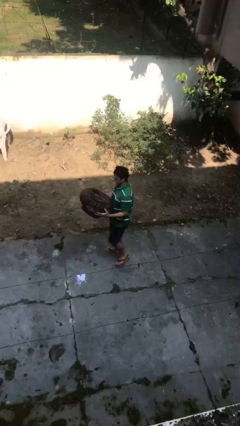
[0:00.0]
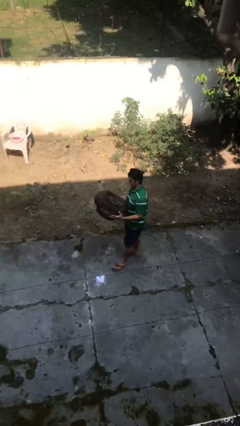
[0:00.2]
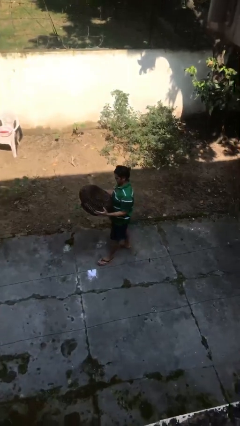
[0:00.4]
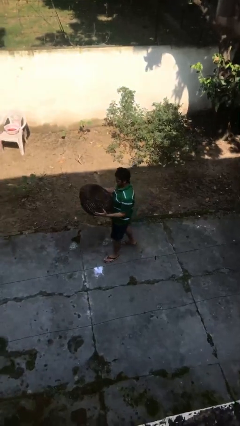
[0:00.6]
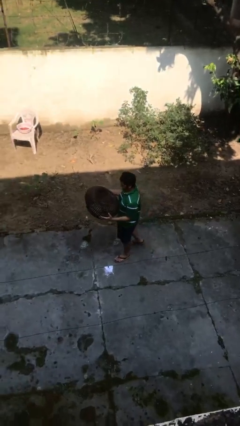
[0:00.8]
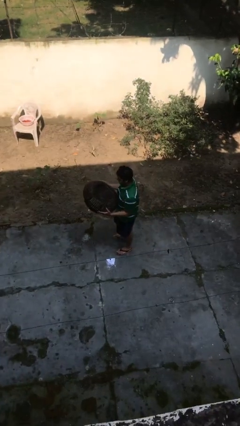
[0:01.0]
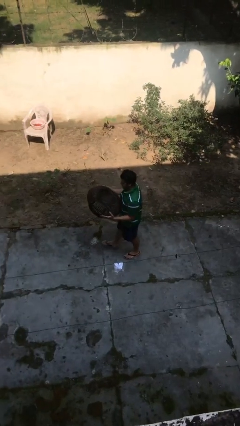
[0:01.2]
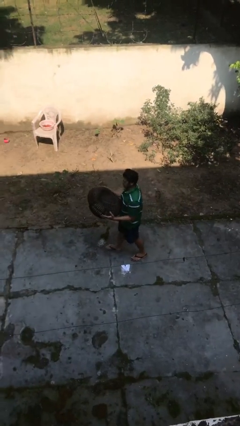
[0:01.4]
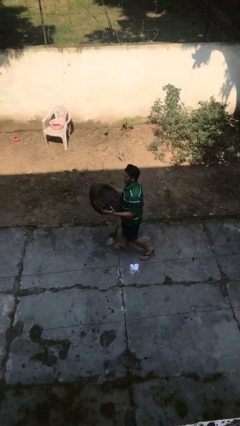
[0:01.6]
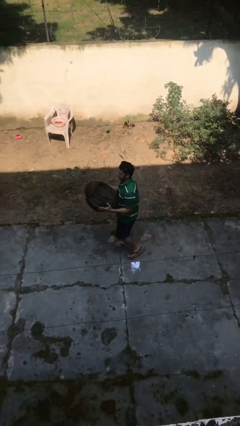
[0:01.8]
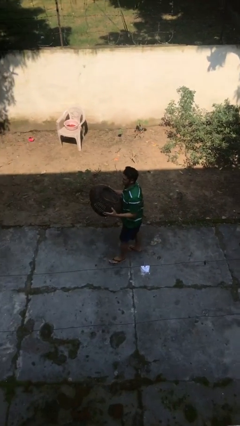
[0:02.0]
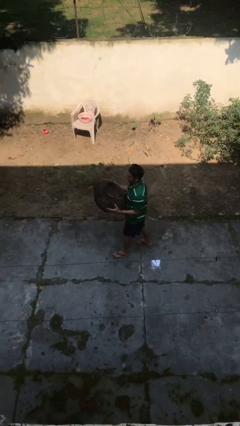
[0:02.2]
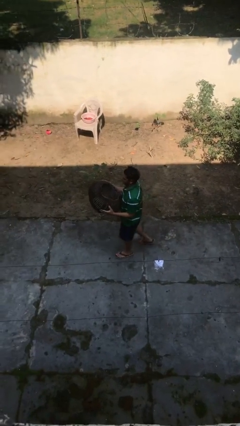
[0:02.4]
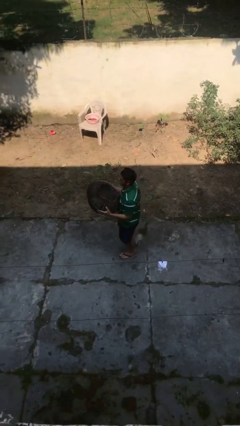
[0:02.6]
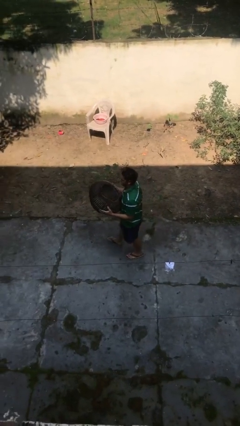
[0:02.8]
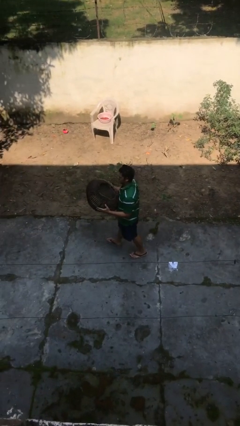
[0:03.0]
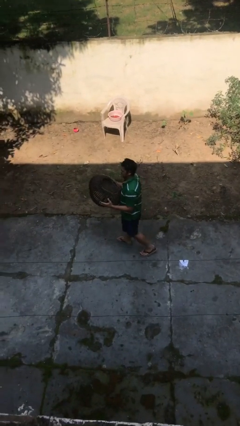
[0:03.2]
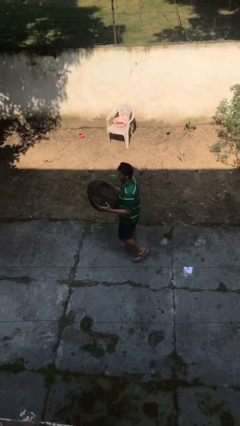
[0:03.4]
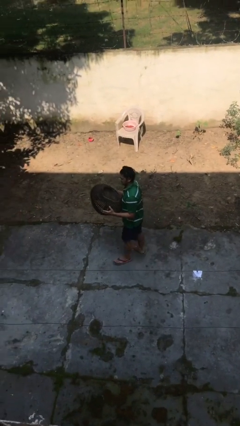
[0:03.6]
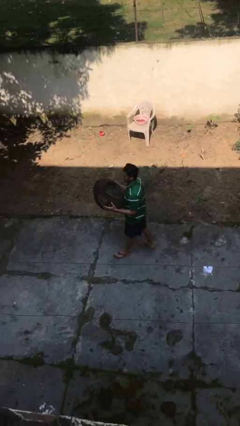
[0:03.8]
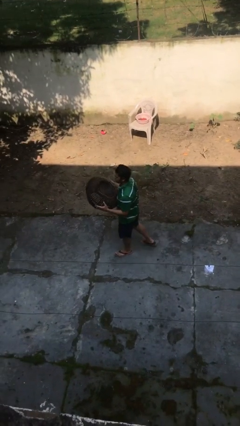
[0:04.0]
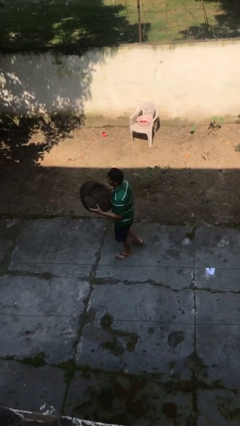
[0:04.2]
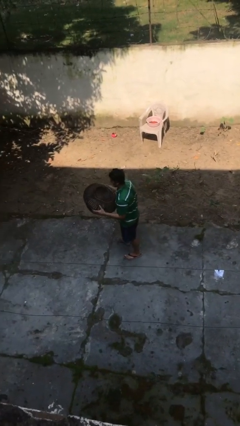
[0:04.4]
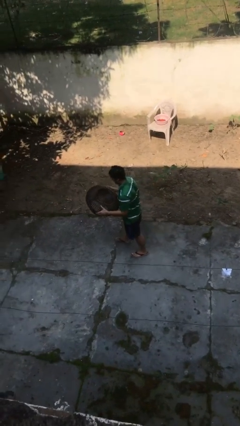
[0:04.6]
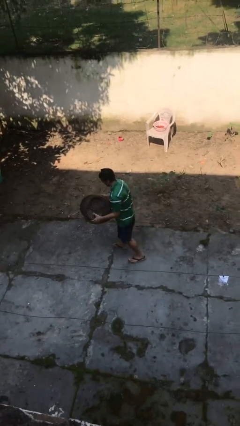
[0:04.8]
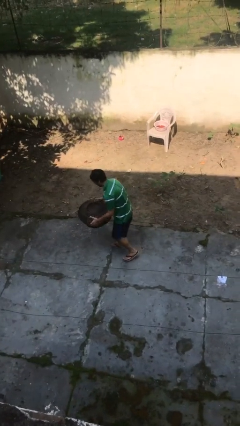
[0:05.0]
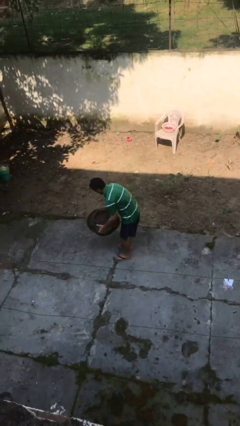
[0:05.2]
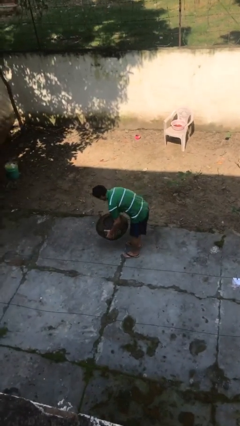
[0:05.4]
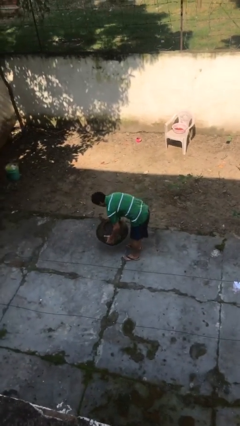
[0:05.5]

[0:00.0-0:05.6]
person carries heavy object

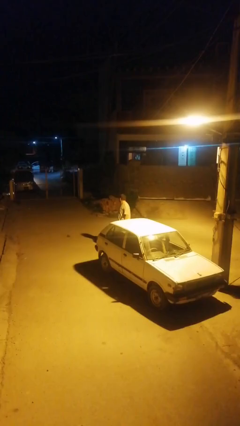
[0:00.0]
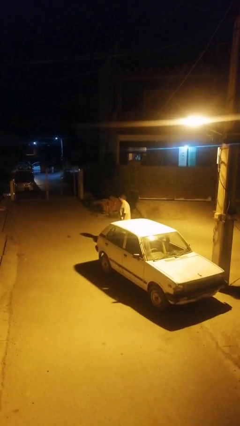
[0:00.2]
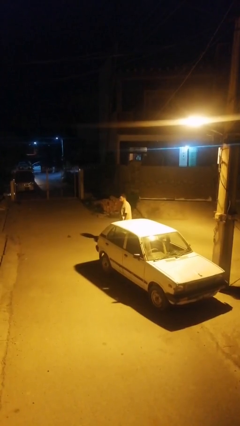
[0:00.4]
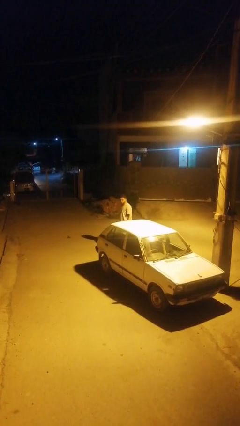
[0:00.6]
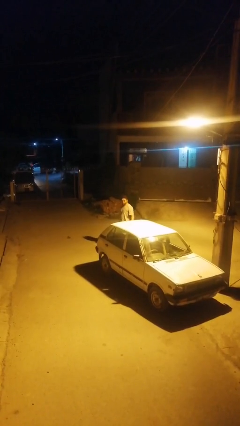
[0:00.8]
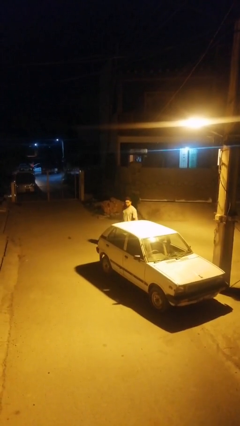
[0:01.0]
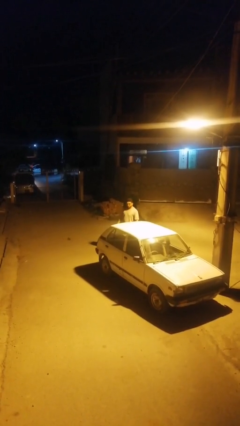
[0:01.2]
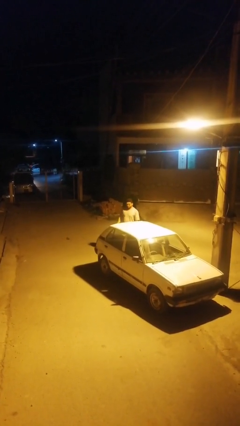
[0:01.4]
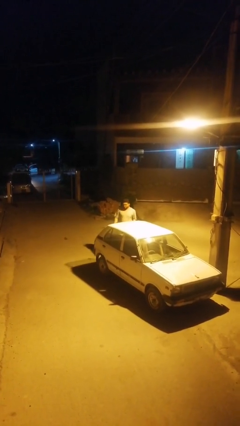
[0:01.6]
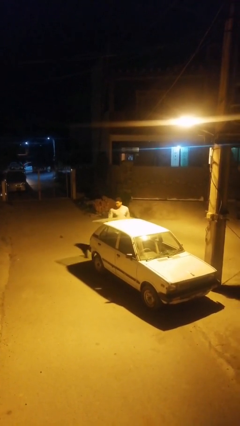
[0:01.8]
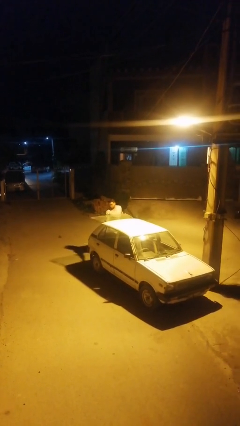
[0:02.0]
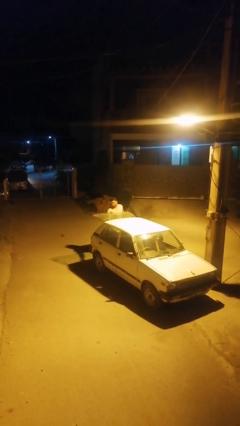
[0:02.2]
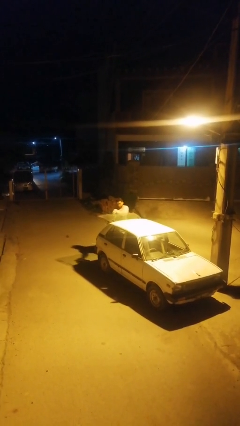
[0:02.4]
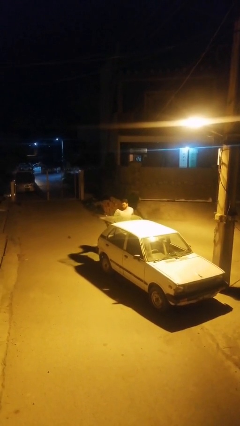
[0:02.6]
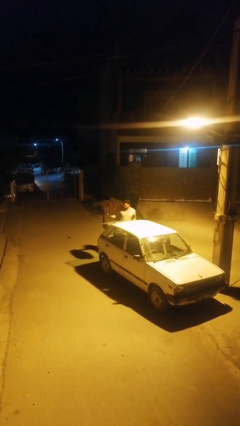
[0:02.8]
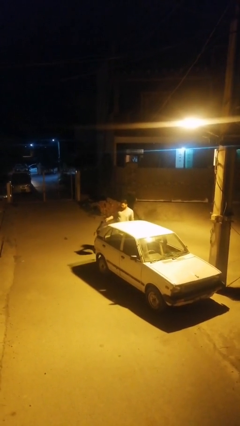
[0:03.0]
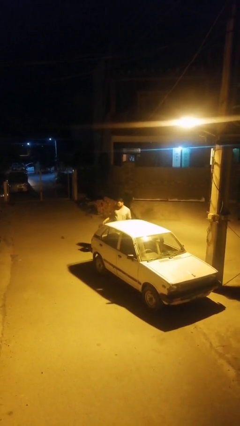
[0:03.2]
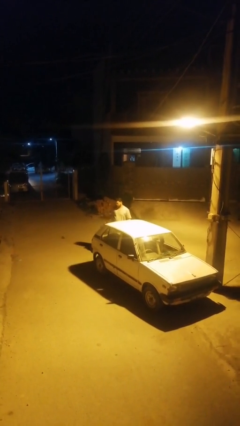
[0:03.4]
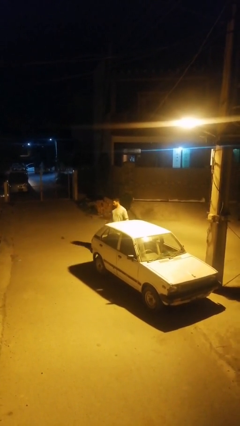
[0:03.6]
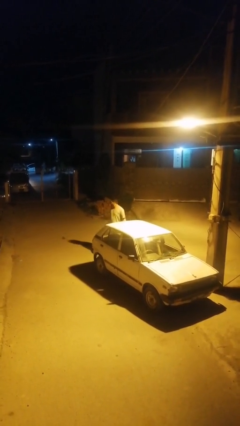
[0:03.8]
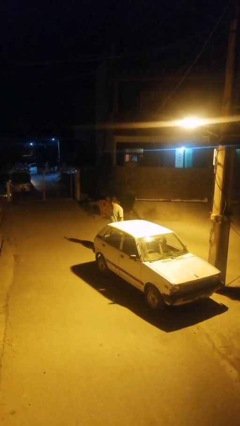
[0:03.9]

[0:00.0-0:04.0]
person unloads car

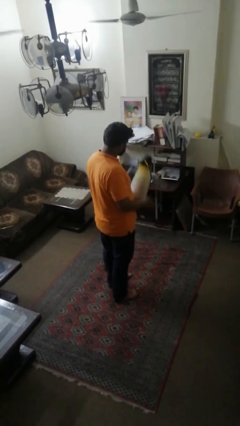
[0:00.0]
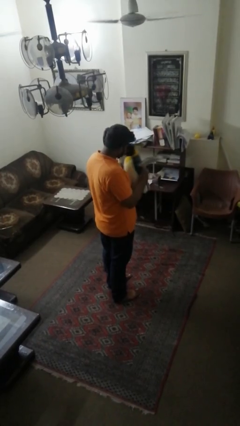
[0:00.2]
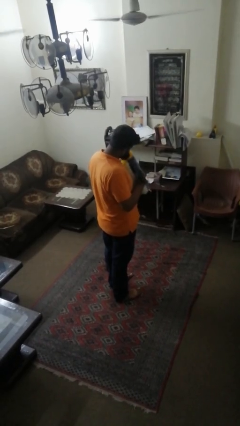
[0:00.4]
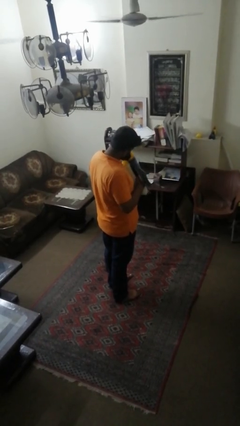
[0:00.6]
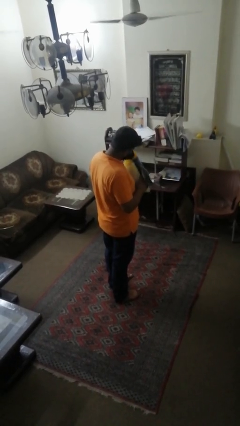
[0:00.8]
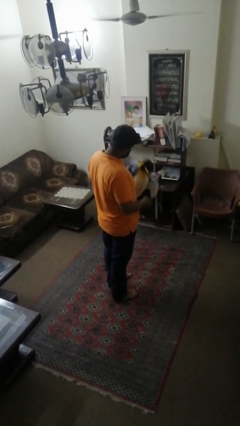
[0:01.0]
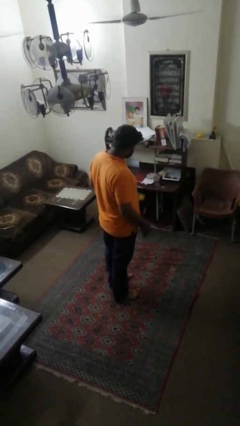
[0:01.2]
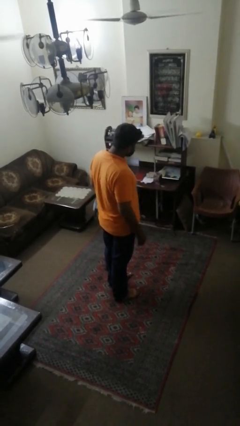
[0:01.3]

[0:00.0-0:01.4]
person hugs stuffed animal

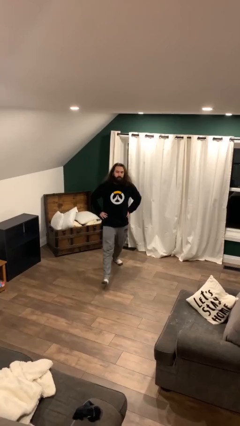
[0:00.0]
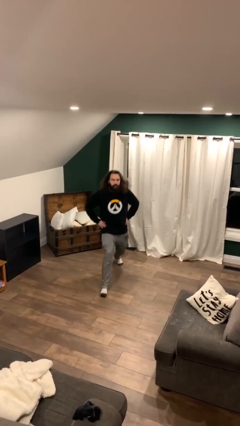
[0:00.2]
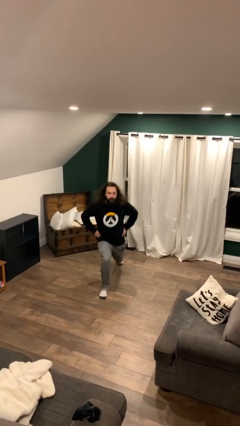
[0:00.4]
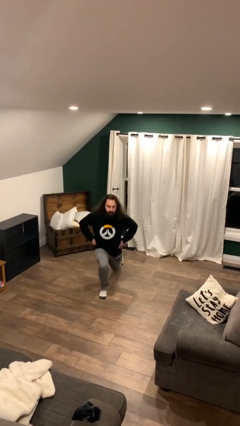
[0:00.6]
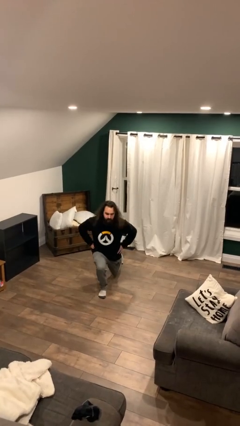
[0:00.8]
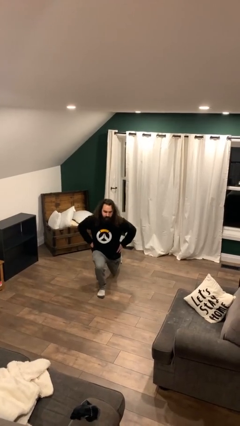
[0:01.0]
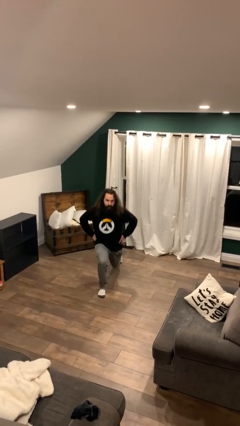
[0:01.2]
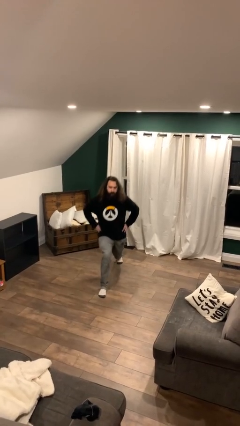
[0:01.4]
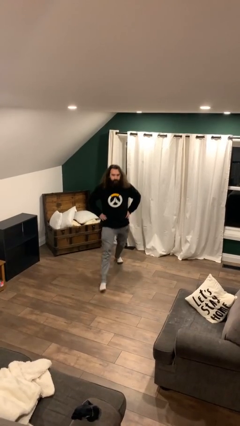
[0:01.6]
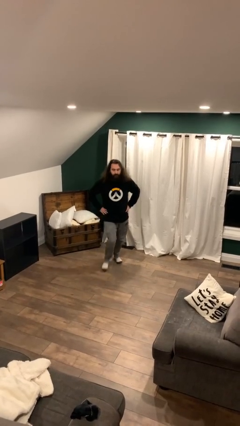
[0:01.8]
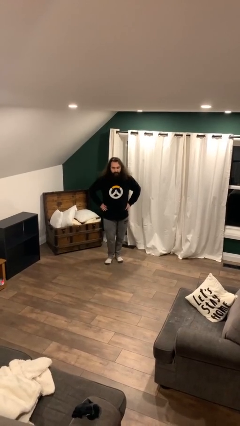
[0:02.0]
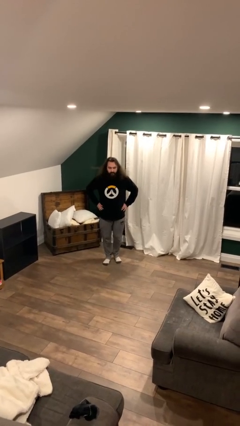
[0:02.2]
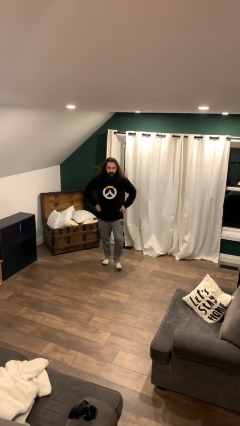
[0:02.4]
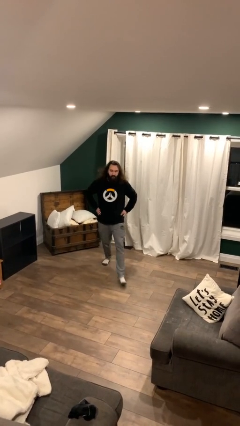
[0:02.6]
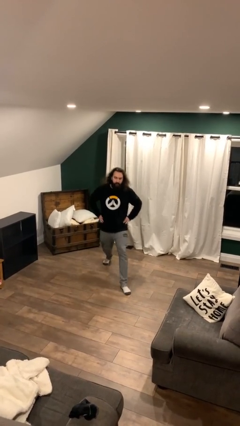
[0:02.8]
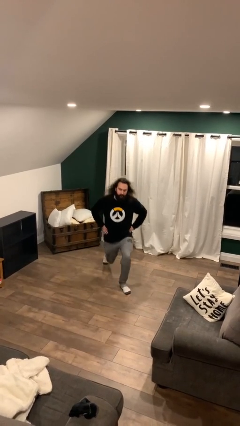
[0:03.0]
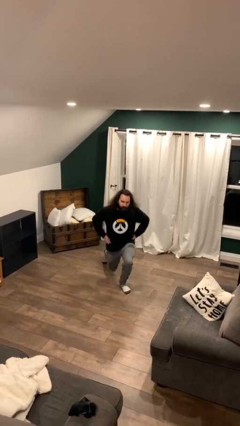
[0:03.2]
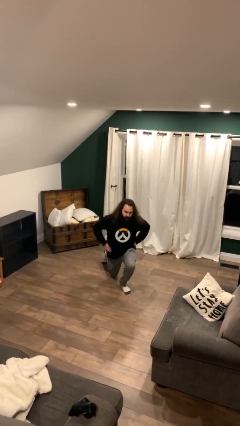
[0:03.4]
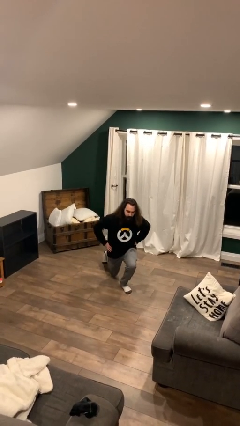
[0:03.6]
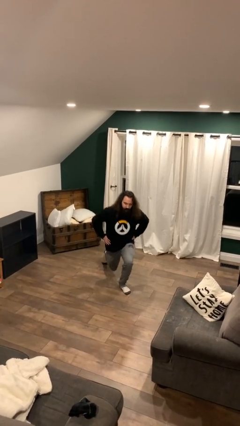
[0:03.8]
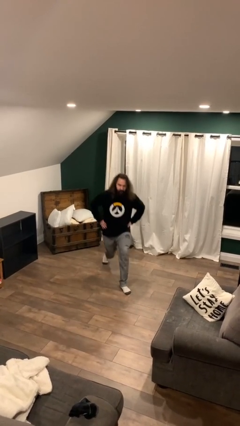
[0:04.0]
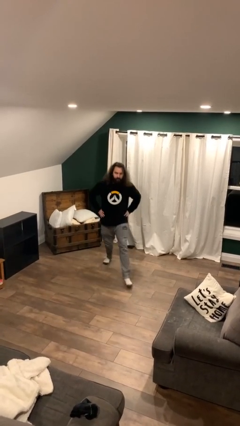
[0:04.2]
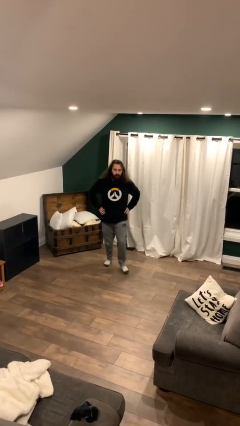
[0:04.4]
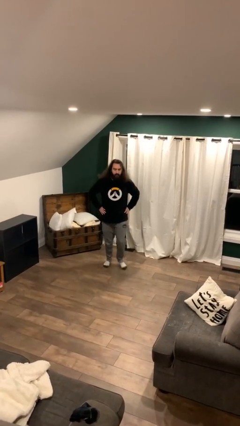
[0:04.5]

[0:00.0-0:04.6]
person exercises with lunges

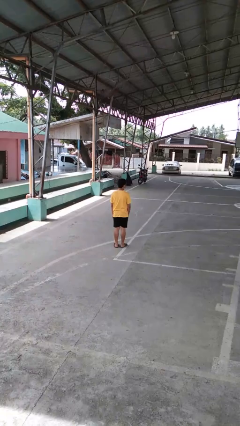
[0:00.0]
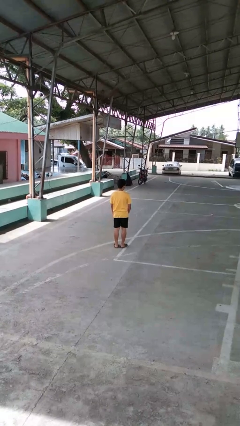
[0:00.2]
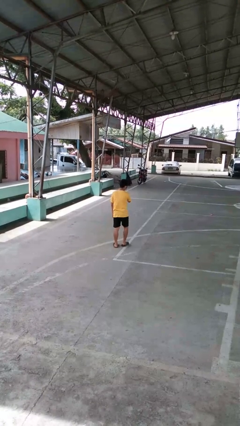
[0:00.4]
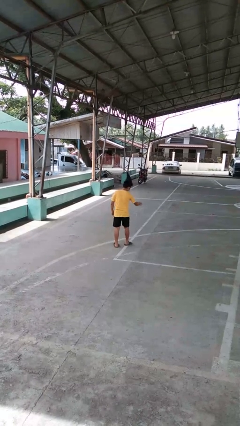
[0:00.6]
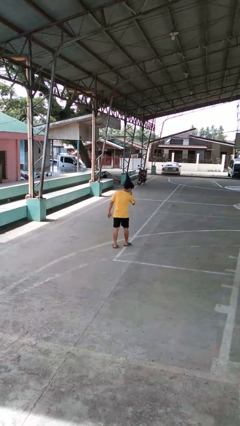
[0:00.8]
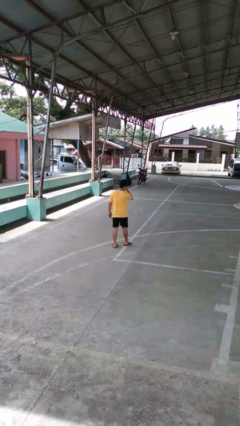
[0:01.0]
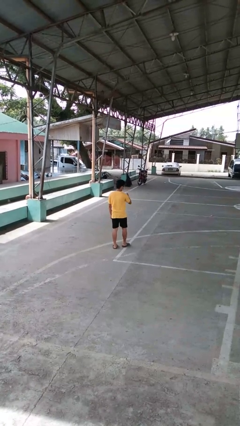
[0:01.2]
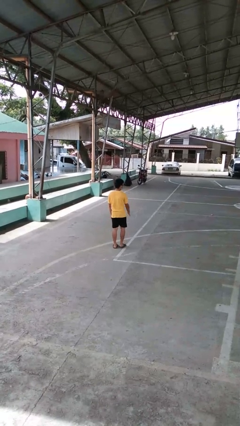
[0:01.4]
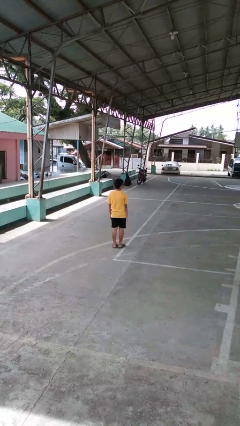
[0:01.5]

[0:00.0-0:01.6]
person karate chop
